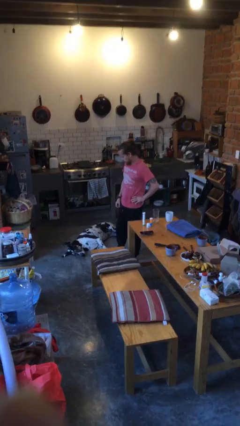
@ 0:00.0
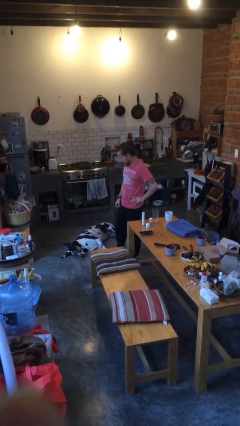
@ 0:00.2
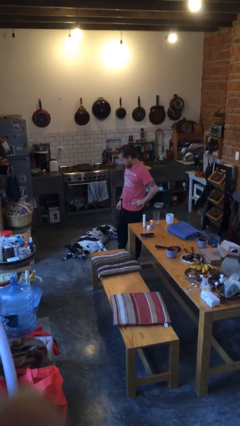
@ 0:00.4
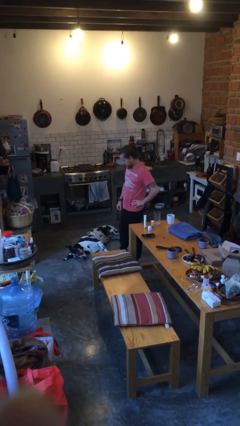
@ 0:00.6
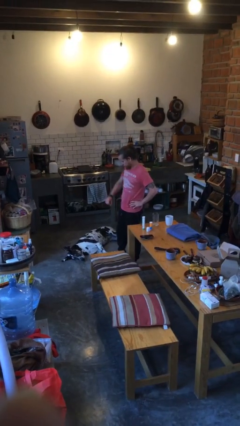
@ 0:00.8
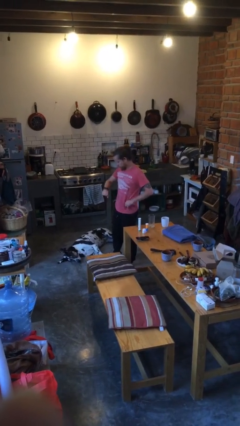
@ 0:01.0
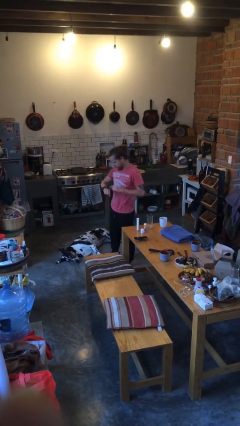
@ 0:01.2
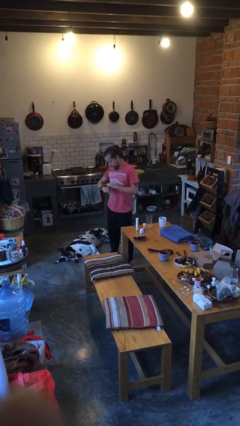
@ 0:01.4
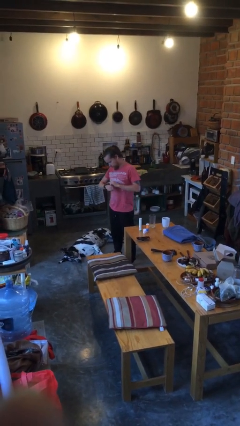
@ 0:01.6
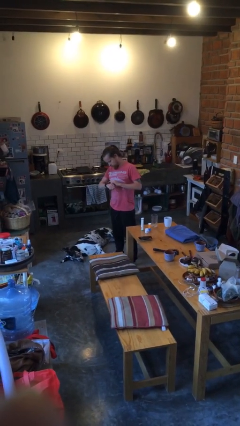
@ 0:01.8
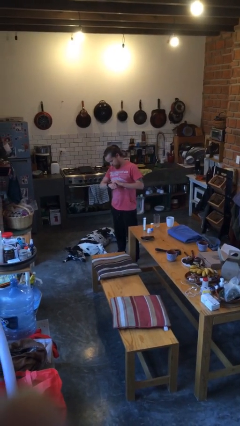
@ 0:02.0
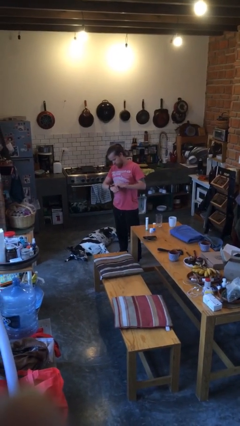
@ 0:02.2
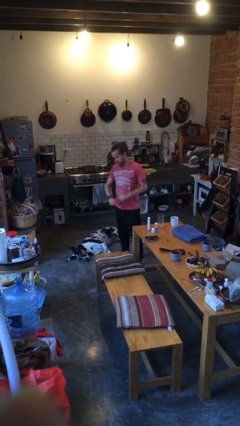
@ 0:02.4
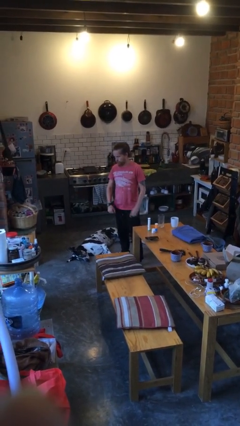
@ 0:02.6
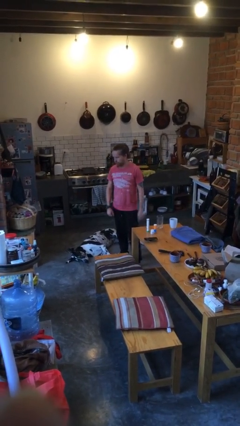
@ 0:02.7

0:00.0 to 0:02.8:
person looks at wristwatch

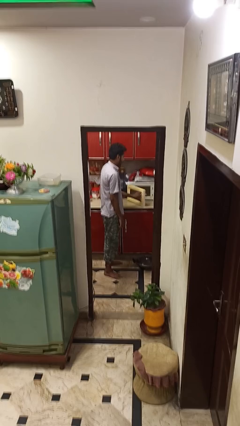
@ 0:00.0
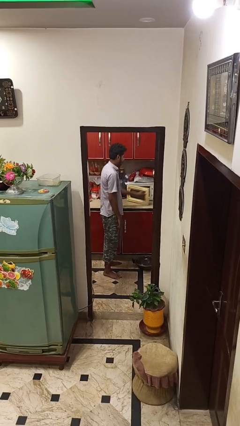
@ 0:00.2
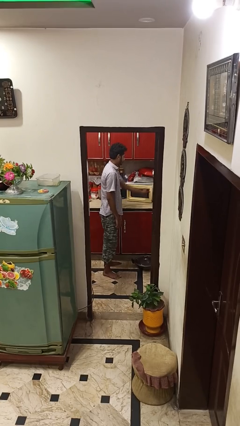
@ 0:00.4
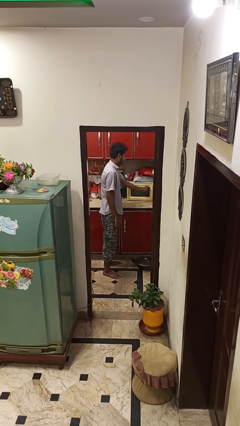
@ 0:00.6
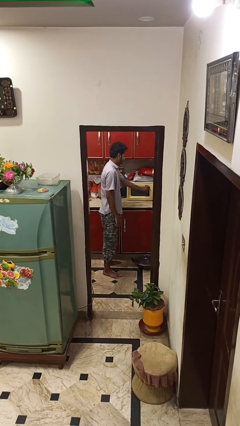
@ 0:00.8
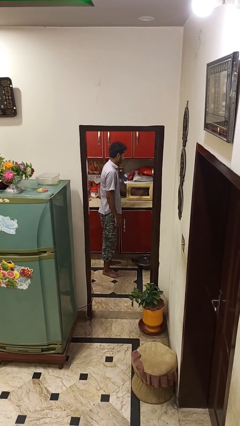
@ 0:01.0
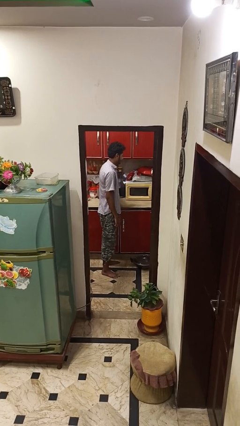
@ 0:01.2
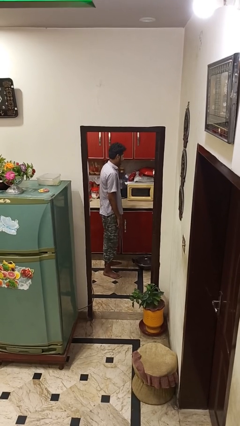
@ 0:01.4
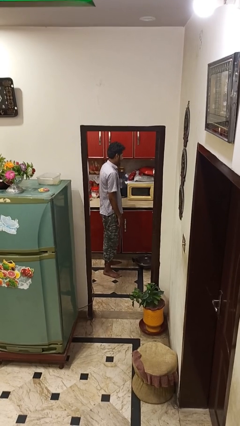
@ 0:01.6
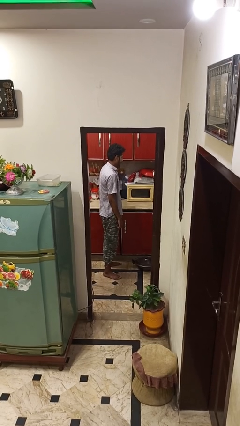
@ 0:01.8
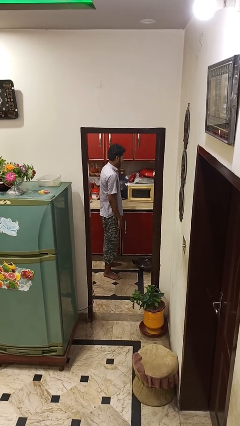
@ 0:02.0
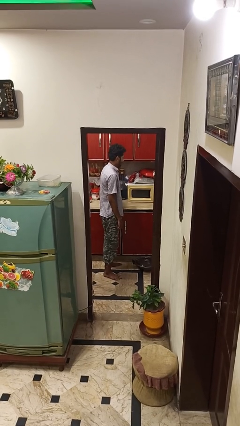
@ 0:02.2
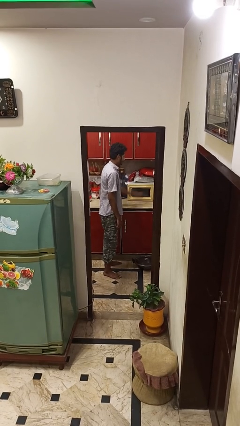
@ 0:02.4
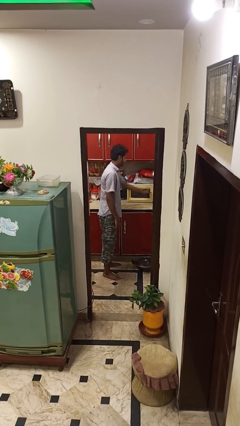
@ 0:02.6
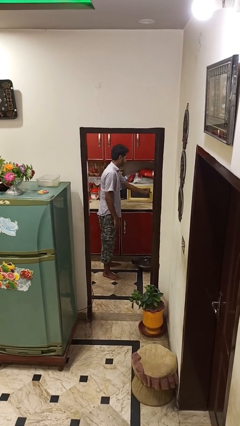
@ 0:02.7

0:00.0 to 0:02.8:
person closes microwave

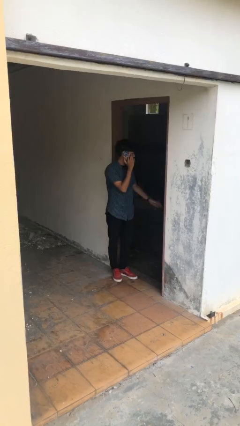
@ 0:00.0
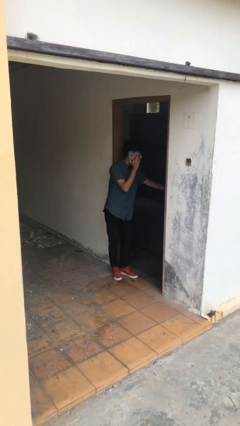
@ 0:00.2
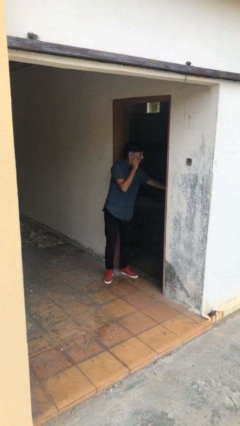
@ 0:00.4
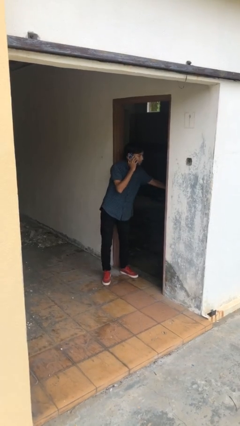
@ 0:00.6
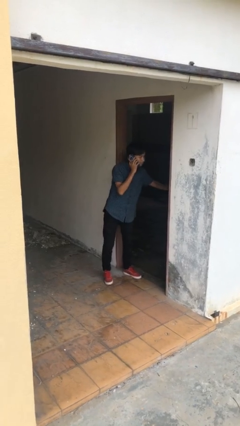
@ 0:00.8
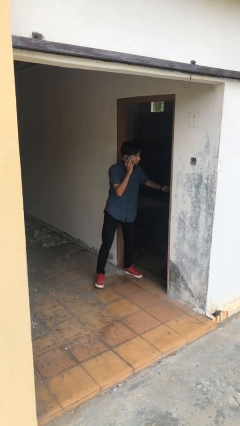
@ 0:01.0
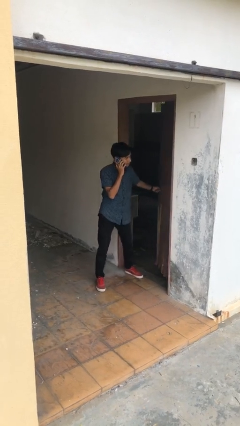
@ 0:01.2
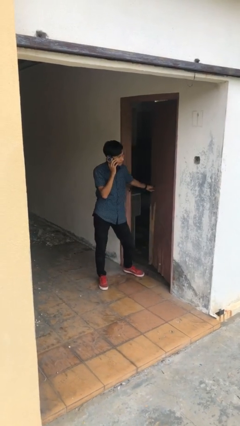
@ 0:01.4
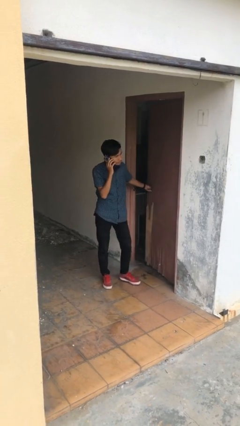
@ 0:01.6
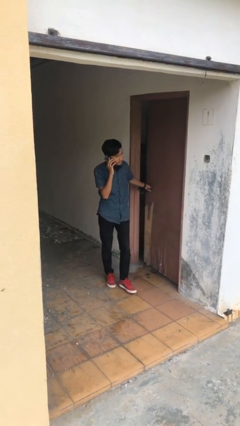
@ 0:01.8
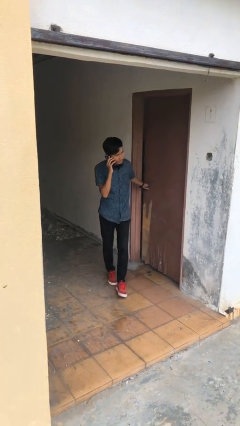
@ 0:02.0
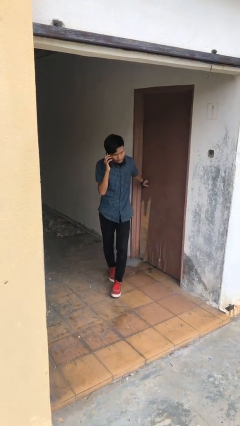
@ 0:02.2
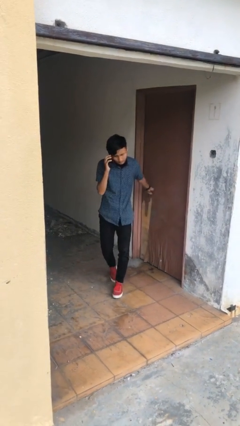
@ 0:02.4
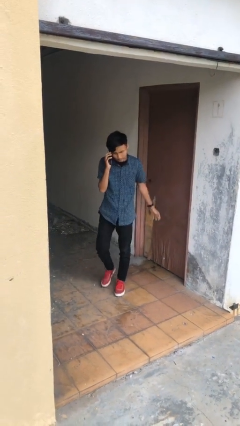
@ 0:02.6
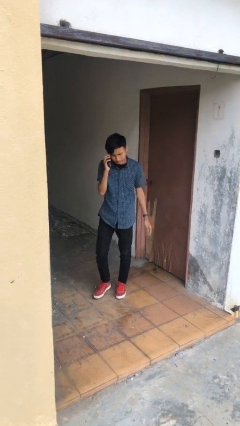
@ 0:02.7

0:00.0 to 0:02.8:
person closes facility door

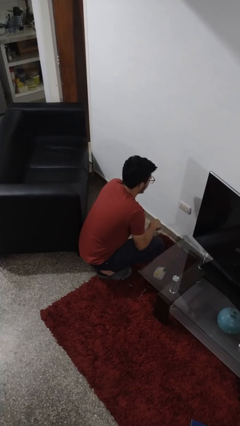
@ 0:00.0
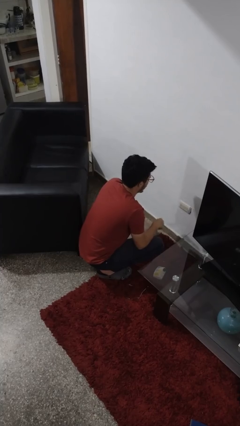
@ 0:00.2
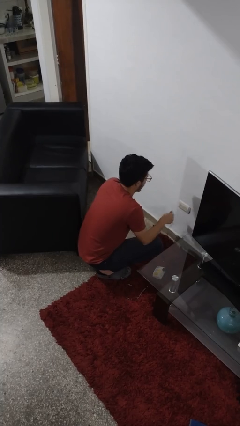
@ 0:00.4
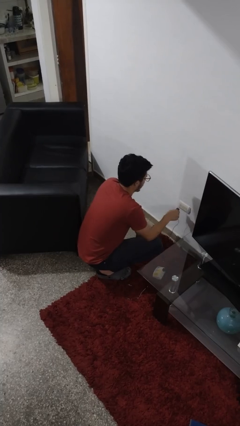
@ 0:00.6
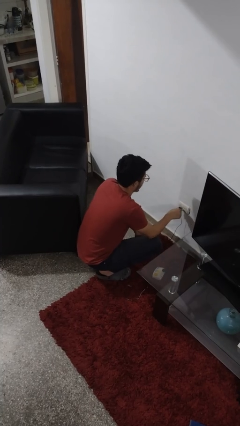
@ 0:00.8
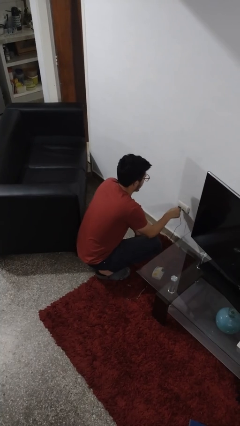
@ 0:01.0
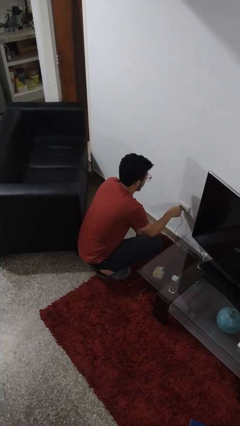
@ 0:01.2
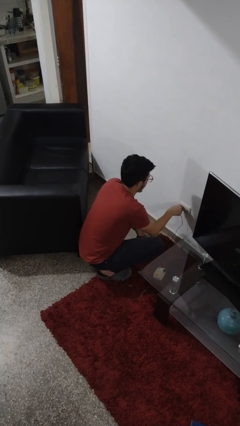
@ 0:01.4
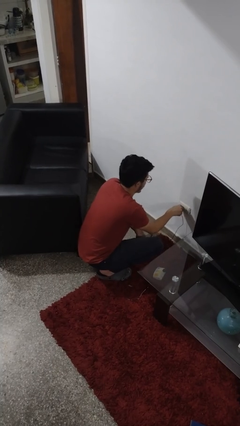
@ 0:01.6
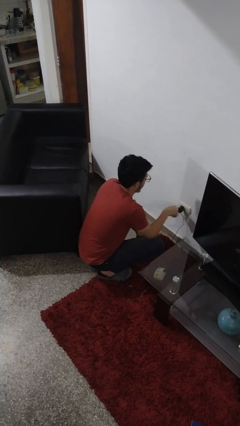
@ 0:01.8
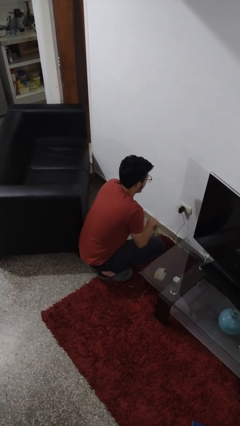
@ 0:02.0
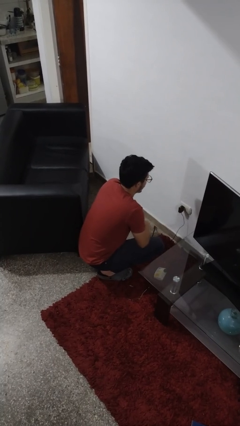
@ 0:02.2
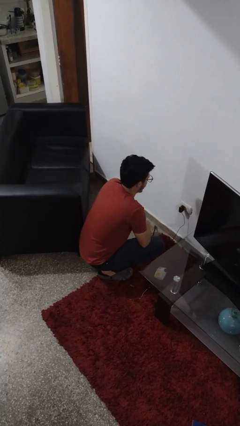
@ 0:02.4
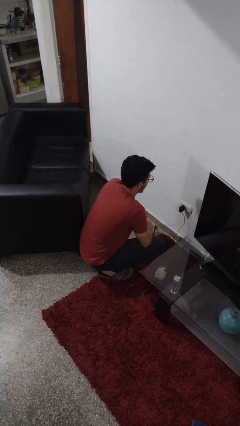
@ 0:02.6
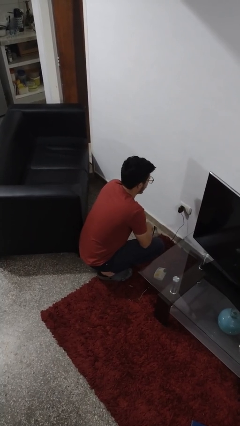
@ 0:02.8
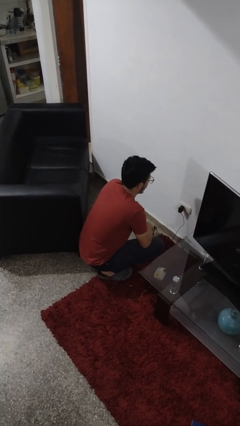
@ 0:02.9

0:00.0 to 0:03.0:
person plugs into electrical socket

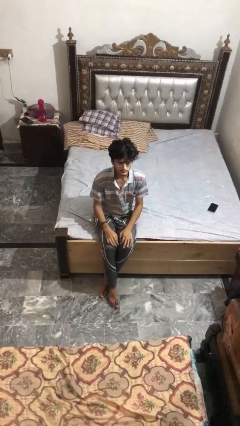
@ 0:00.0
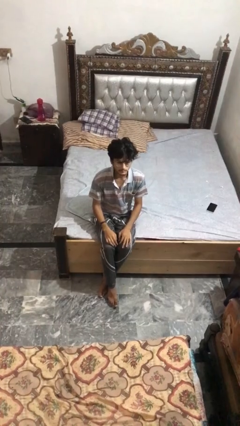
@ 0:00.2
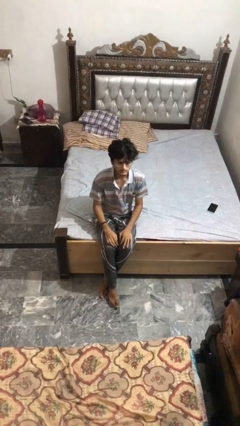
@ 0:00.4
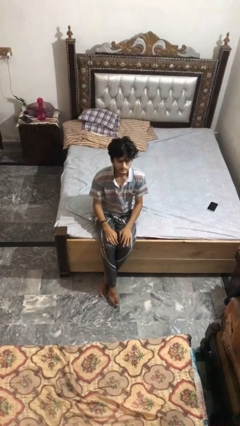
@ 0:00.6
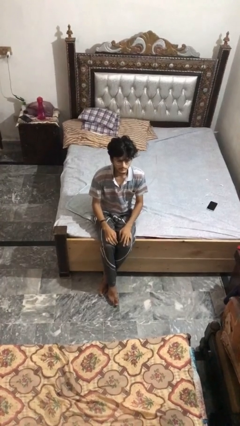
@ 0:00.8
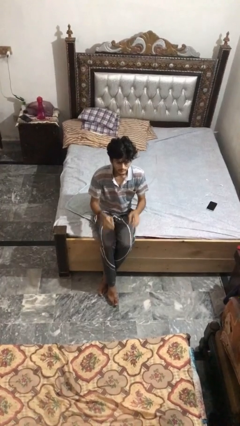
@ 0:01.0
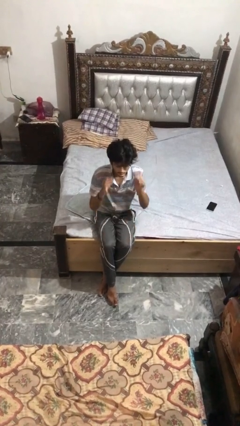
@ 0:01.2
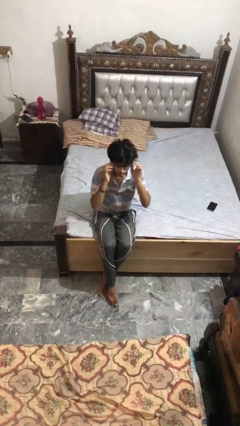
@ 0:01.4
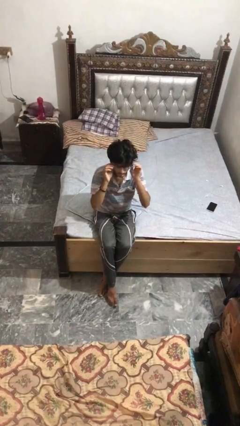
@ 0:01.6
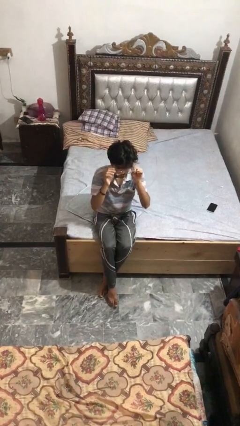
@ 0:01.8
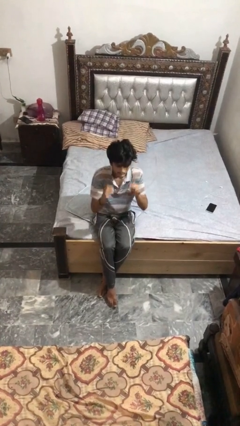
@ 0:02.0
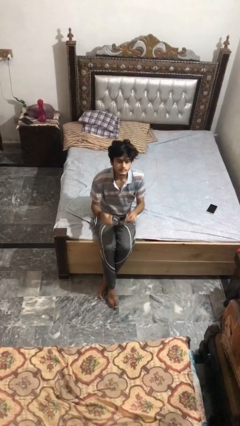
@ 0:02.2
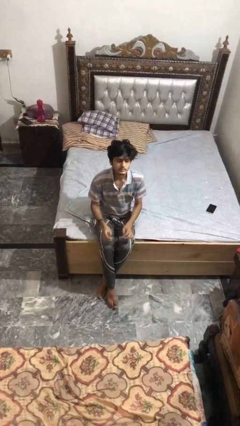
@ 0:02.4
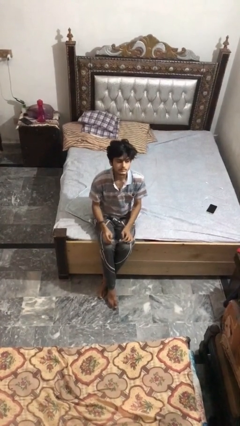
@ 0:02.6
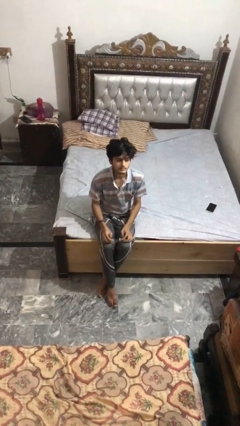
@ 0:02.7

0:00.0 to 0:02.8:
person takes off glasses

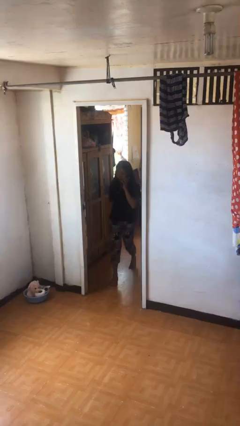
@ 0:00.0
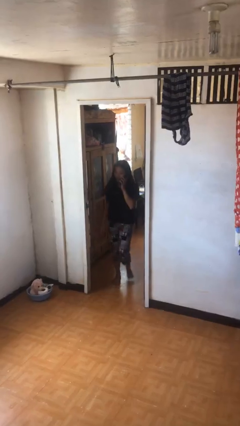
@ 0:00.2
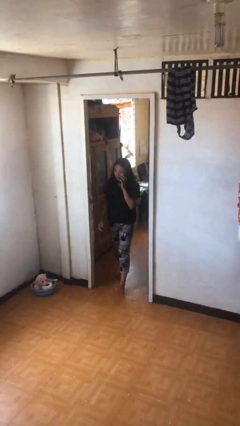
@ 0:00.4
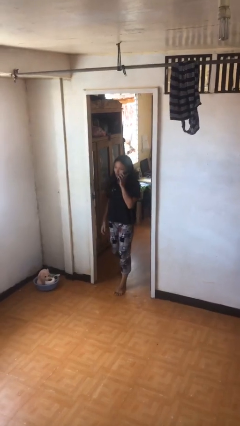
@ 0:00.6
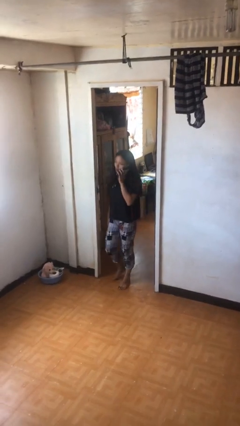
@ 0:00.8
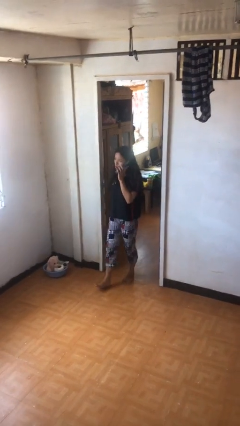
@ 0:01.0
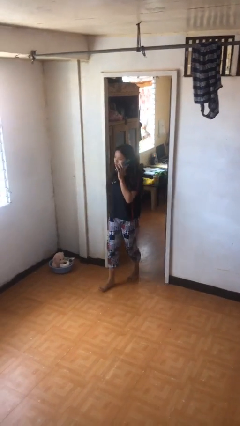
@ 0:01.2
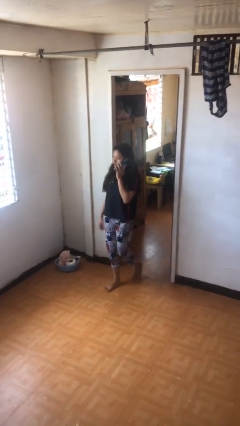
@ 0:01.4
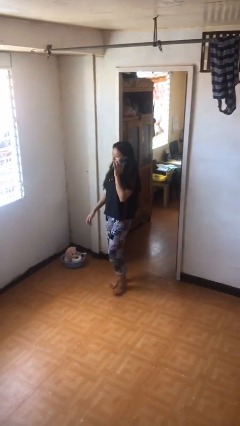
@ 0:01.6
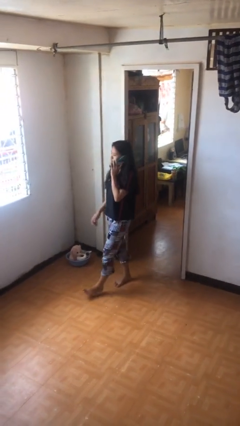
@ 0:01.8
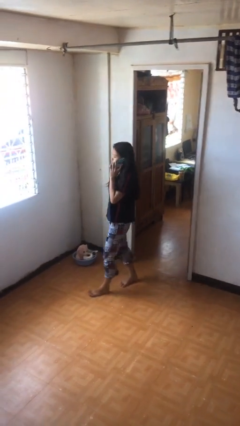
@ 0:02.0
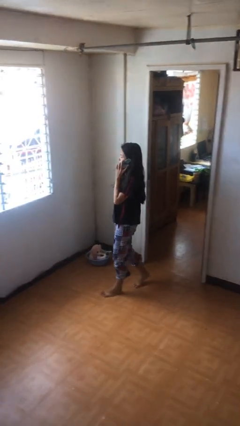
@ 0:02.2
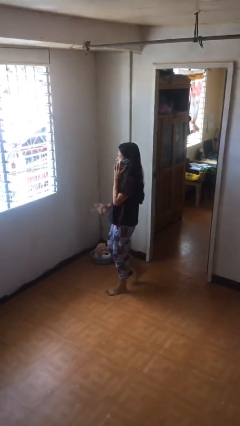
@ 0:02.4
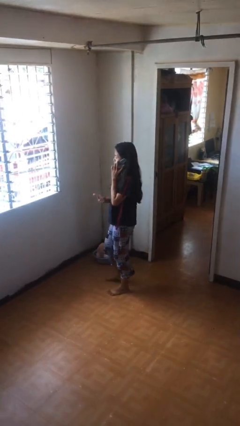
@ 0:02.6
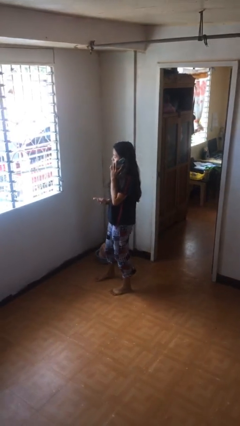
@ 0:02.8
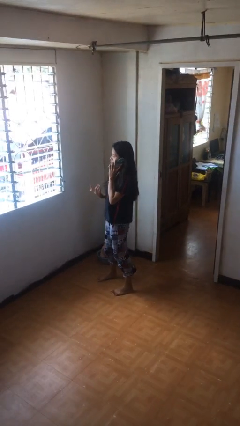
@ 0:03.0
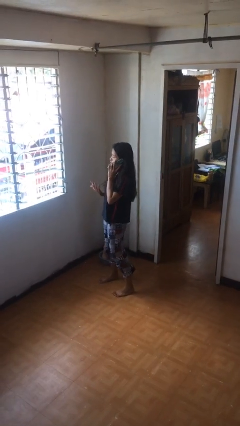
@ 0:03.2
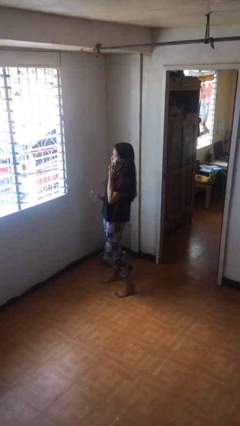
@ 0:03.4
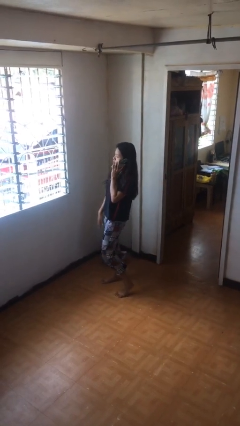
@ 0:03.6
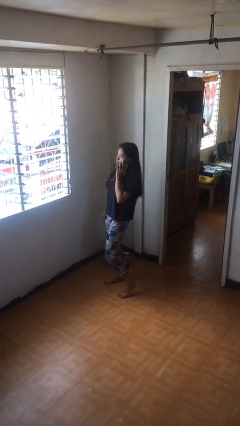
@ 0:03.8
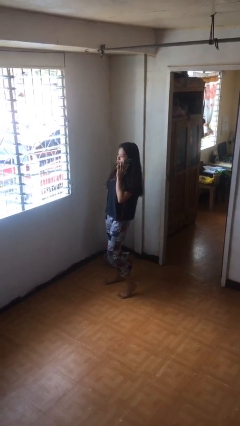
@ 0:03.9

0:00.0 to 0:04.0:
person enters scene through structure
